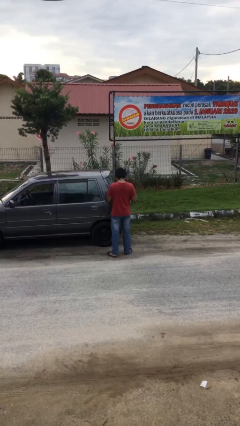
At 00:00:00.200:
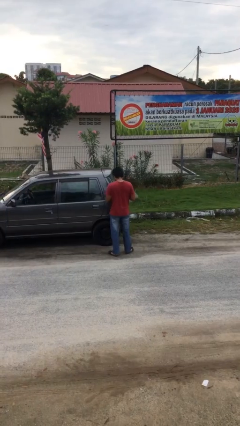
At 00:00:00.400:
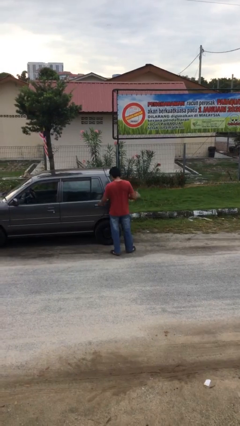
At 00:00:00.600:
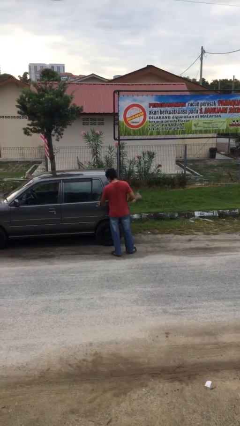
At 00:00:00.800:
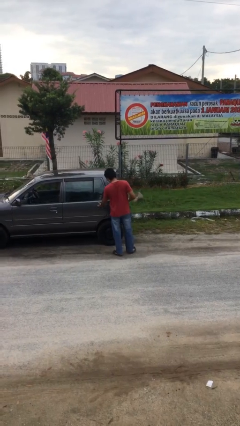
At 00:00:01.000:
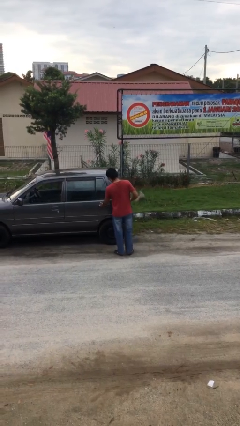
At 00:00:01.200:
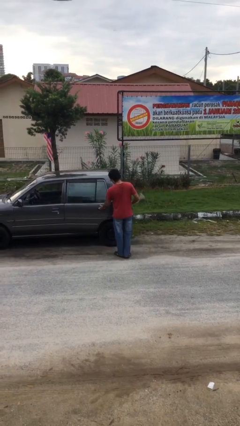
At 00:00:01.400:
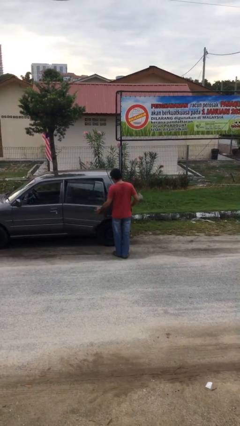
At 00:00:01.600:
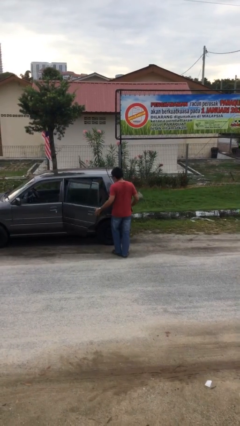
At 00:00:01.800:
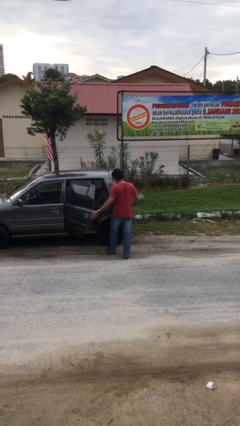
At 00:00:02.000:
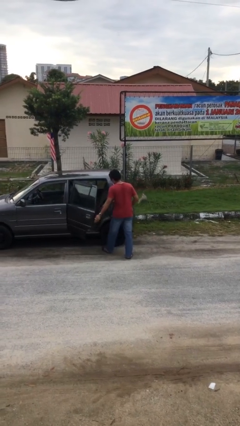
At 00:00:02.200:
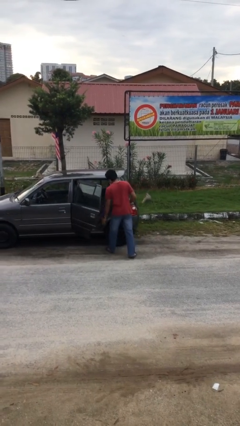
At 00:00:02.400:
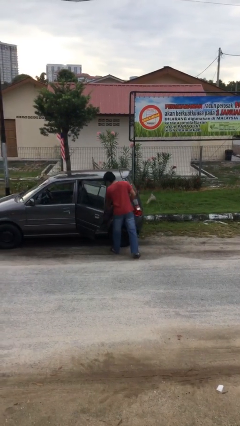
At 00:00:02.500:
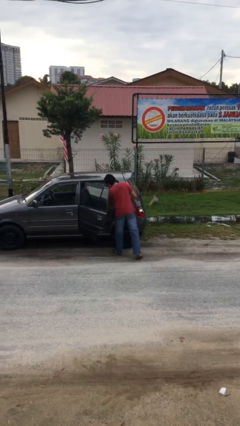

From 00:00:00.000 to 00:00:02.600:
person opens car door

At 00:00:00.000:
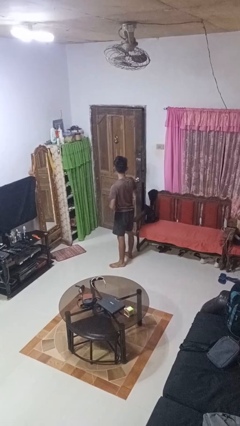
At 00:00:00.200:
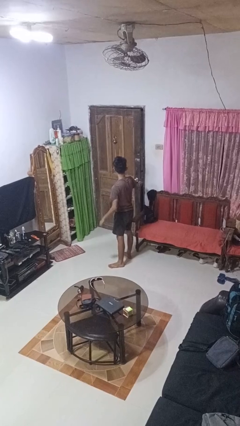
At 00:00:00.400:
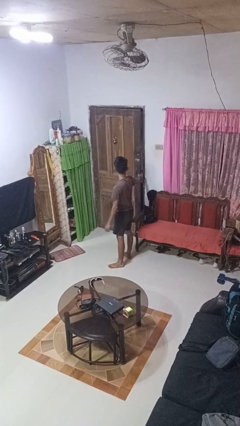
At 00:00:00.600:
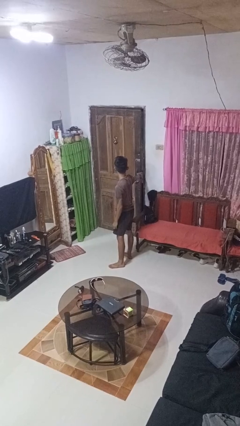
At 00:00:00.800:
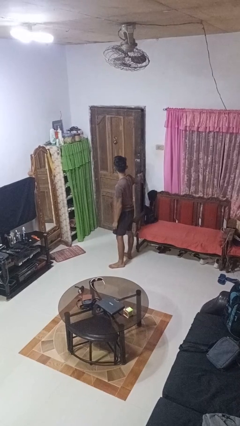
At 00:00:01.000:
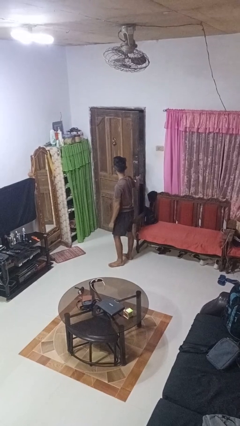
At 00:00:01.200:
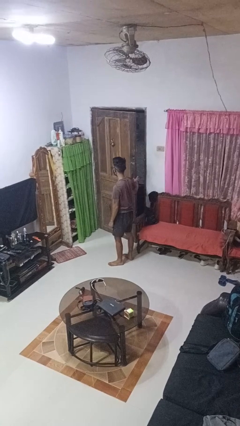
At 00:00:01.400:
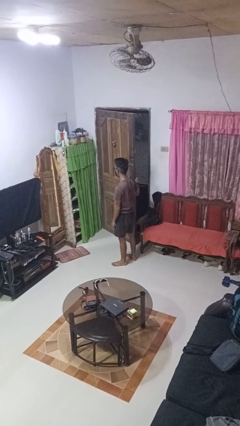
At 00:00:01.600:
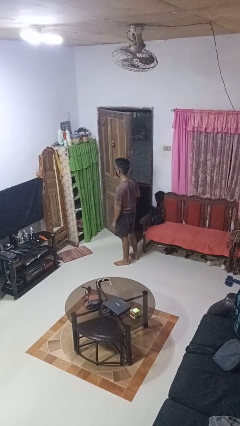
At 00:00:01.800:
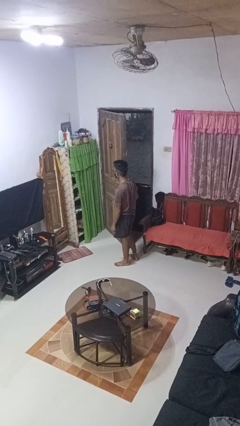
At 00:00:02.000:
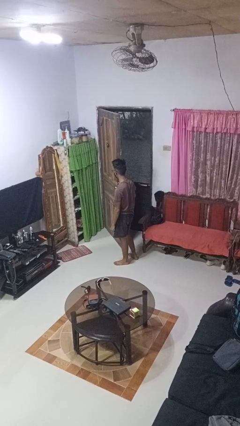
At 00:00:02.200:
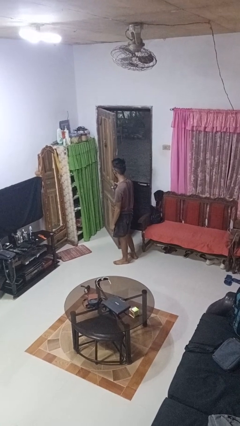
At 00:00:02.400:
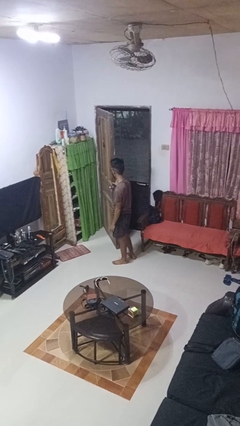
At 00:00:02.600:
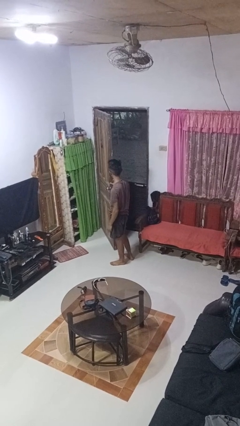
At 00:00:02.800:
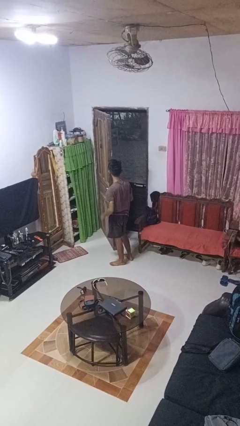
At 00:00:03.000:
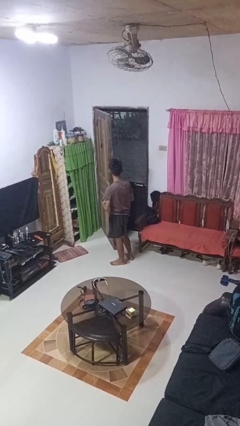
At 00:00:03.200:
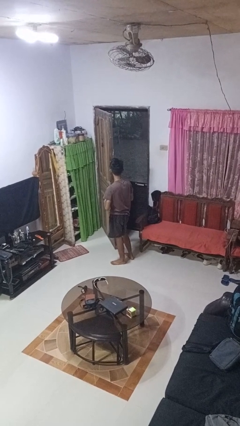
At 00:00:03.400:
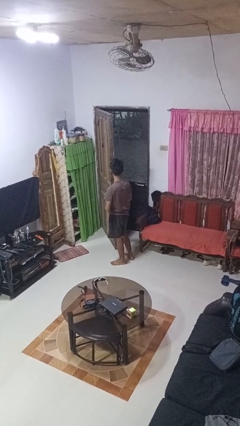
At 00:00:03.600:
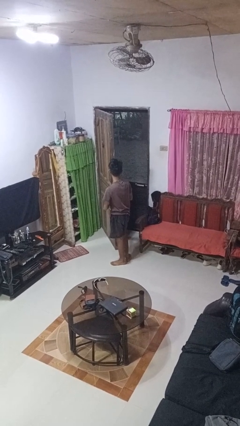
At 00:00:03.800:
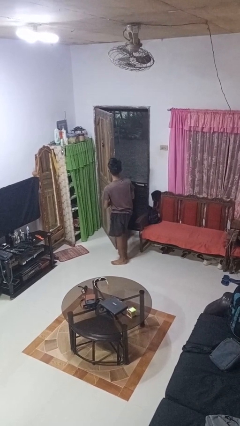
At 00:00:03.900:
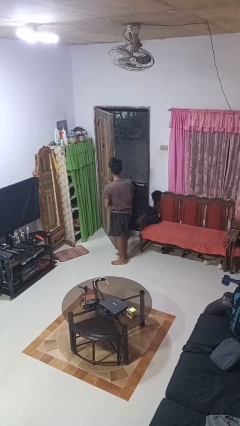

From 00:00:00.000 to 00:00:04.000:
person opens facility door

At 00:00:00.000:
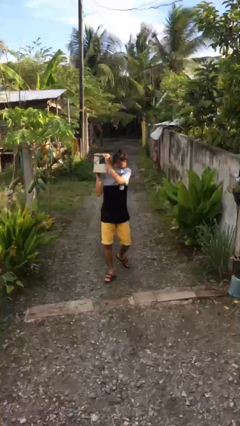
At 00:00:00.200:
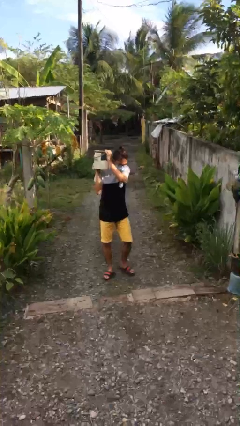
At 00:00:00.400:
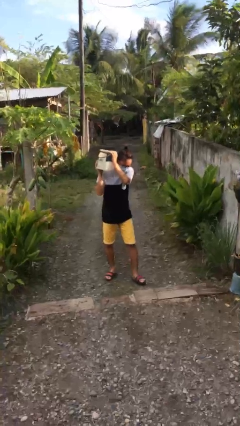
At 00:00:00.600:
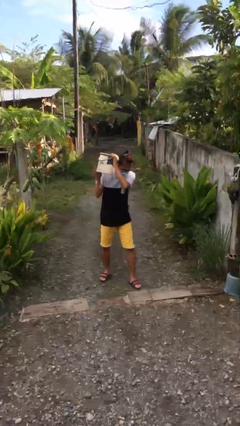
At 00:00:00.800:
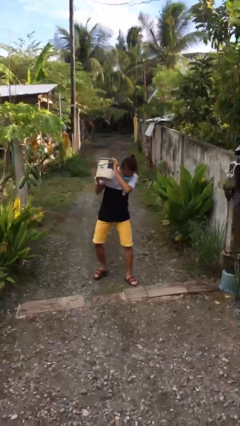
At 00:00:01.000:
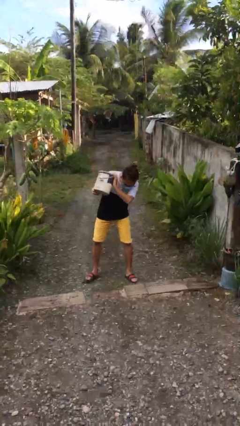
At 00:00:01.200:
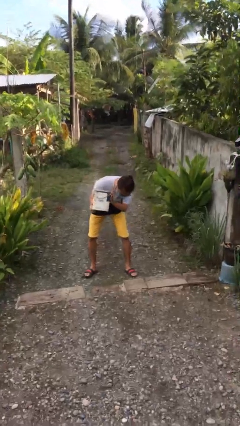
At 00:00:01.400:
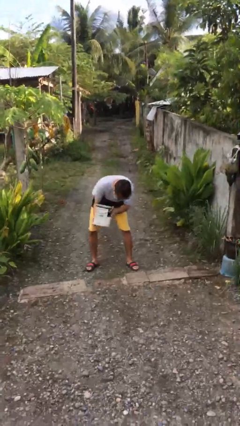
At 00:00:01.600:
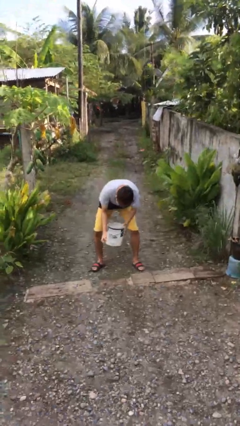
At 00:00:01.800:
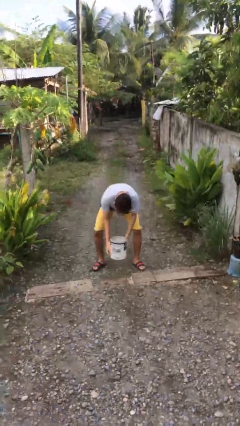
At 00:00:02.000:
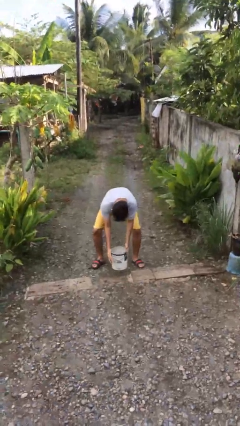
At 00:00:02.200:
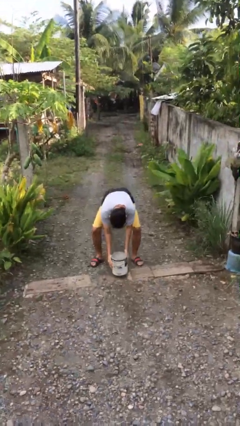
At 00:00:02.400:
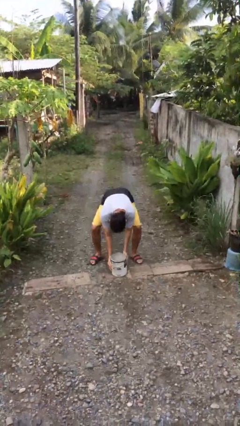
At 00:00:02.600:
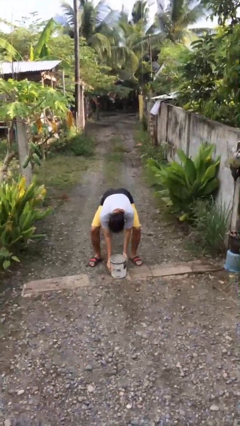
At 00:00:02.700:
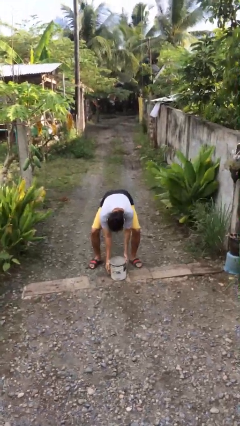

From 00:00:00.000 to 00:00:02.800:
person puts down object on floor

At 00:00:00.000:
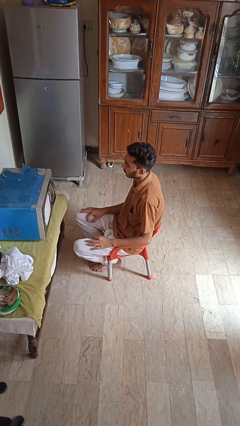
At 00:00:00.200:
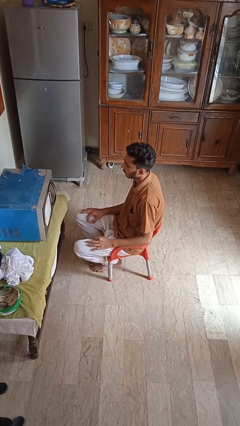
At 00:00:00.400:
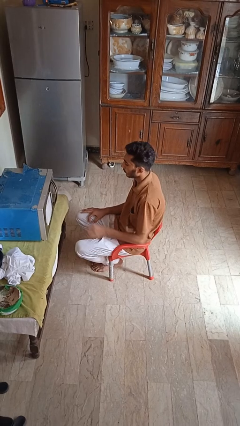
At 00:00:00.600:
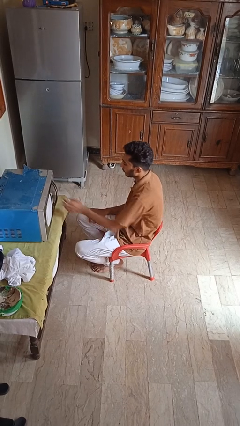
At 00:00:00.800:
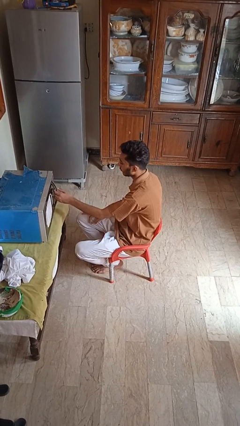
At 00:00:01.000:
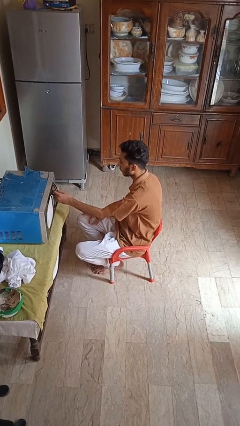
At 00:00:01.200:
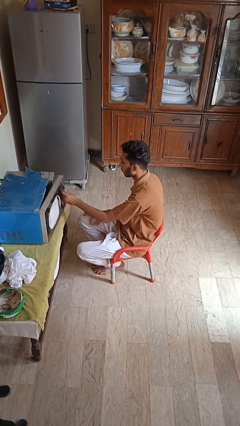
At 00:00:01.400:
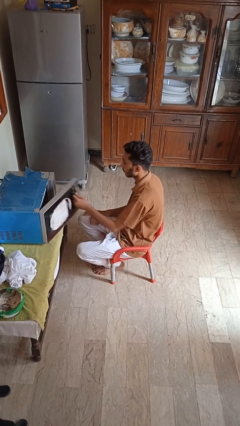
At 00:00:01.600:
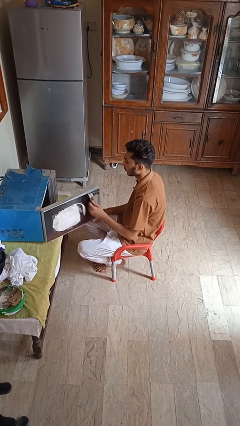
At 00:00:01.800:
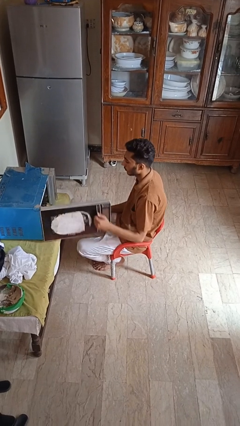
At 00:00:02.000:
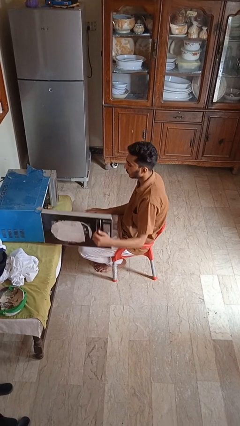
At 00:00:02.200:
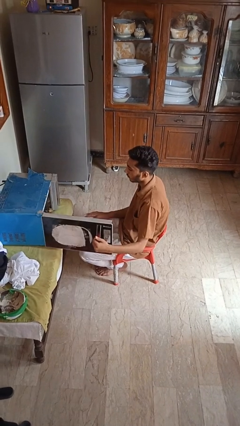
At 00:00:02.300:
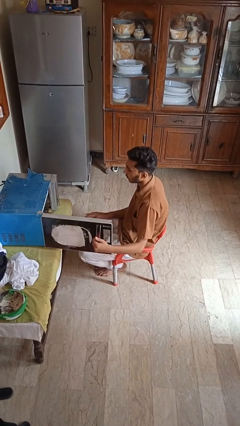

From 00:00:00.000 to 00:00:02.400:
person opens microwave

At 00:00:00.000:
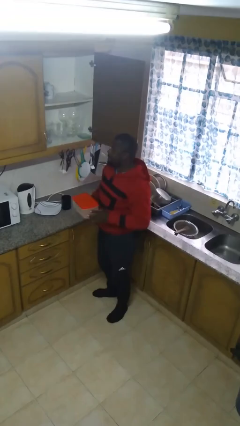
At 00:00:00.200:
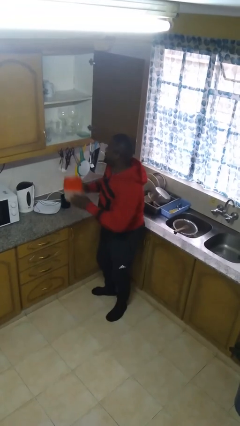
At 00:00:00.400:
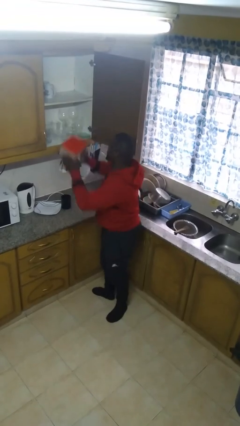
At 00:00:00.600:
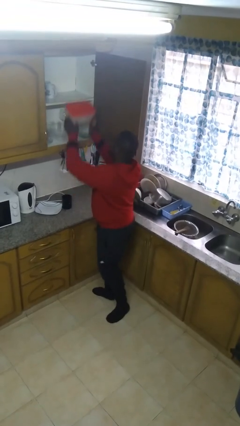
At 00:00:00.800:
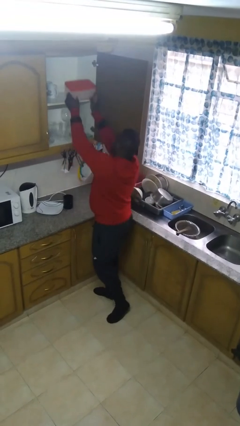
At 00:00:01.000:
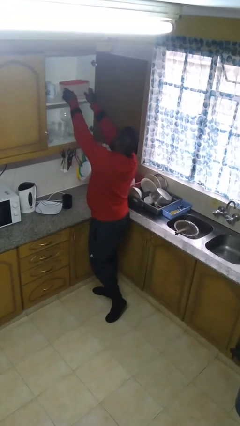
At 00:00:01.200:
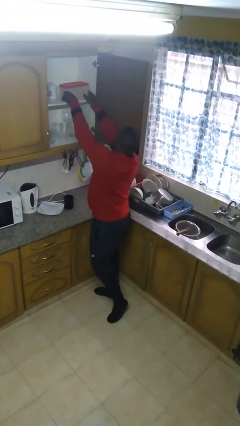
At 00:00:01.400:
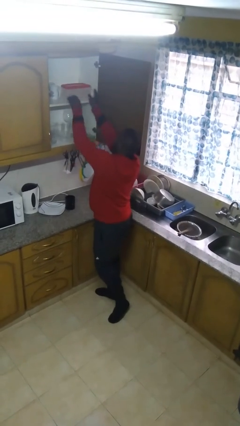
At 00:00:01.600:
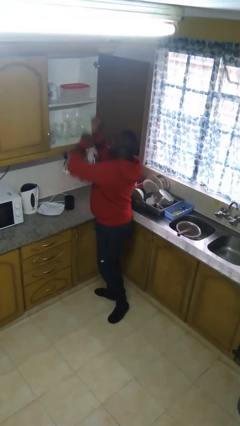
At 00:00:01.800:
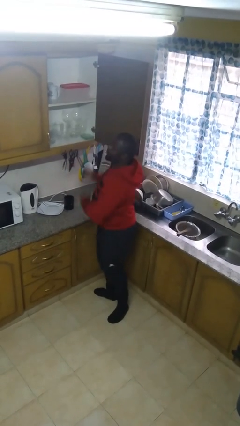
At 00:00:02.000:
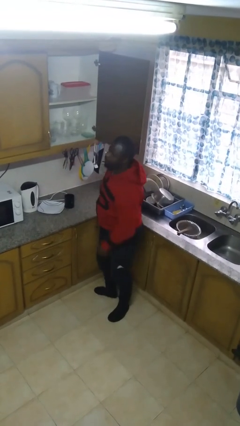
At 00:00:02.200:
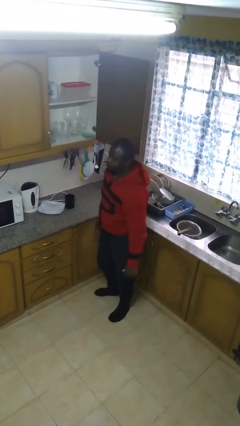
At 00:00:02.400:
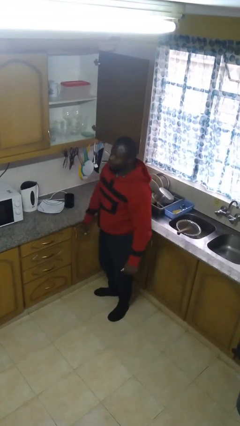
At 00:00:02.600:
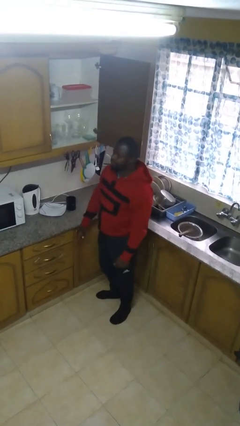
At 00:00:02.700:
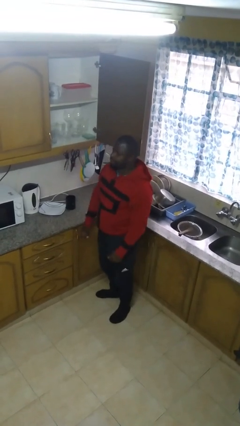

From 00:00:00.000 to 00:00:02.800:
person puts down object into cabinet

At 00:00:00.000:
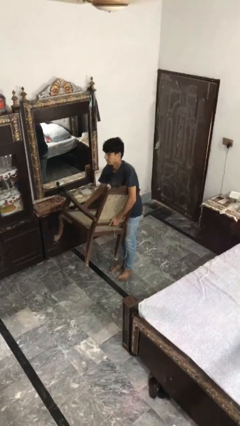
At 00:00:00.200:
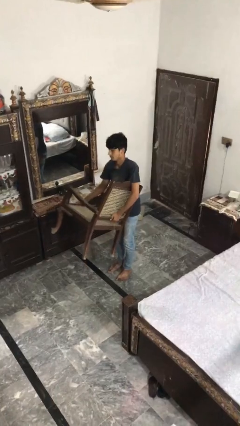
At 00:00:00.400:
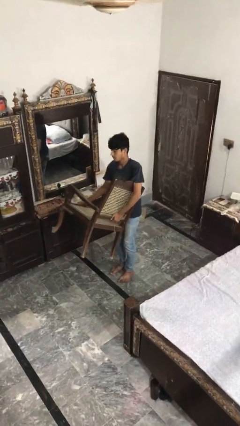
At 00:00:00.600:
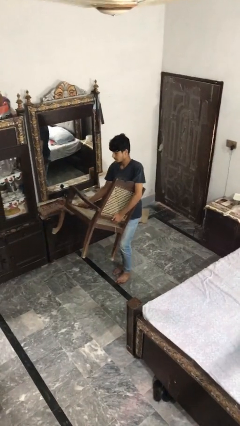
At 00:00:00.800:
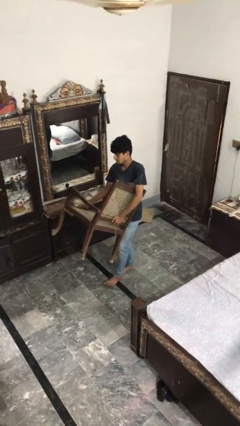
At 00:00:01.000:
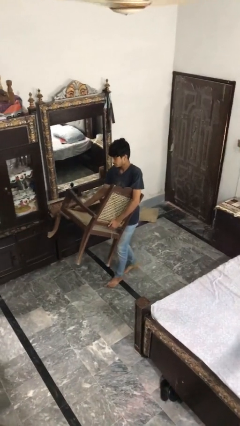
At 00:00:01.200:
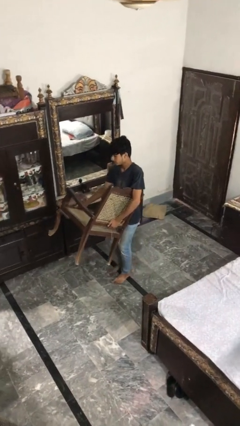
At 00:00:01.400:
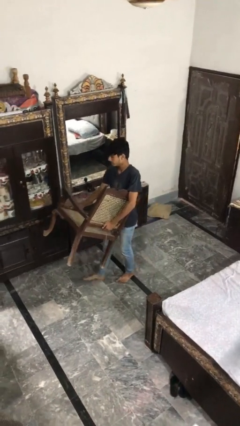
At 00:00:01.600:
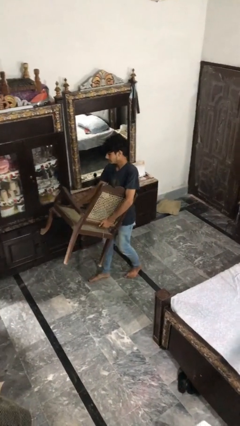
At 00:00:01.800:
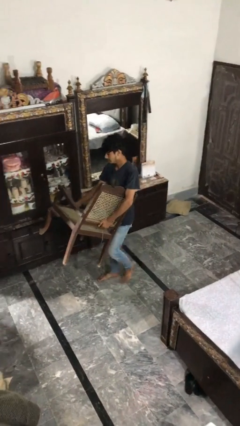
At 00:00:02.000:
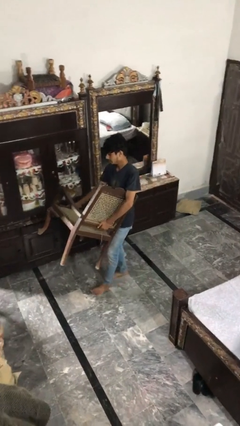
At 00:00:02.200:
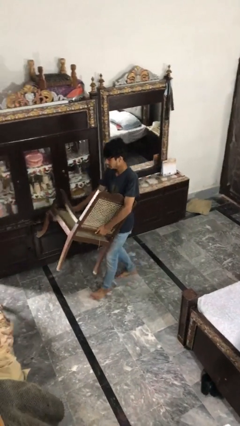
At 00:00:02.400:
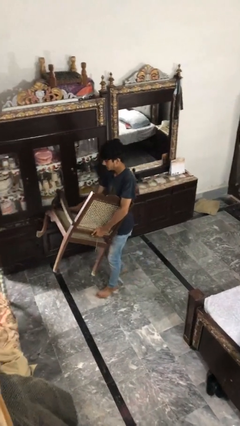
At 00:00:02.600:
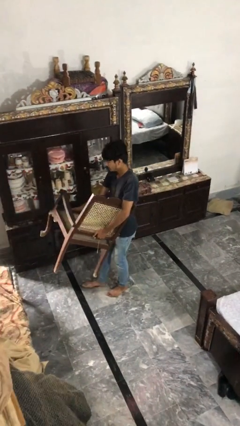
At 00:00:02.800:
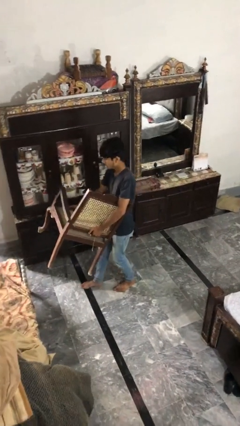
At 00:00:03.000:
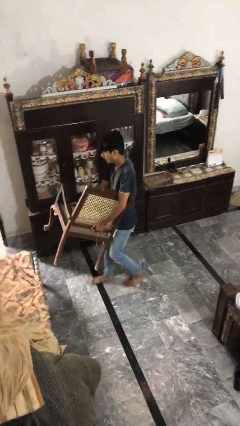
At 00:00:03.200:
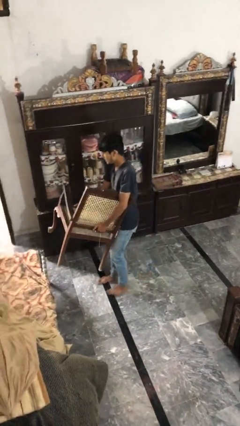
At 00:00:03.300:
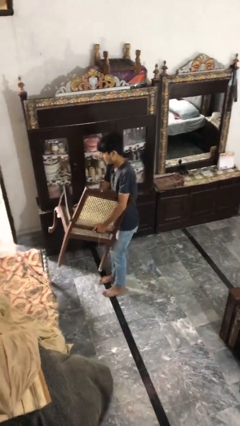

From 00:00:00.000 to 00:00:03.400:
person carries heavy object
